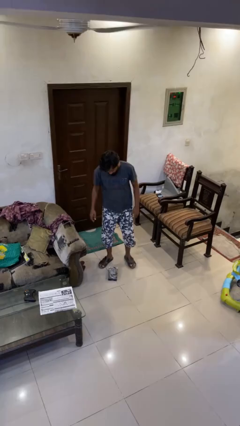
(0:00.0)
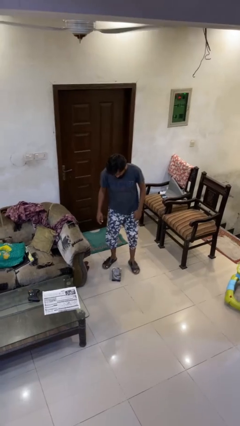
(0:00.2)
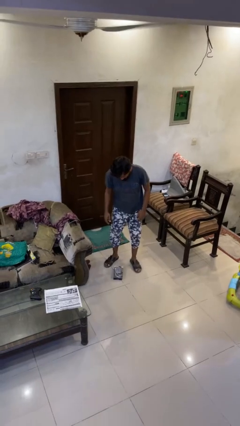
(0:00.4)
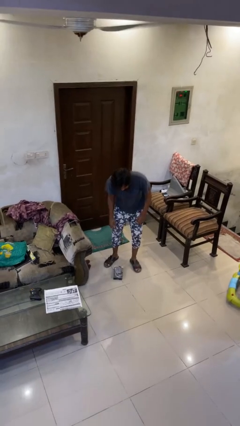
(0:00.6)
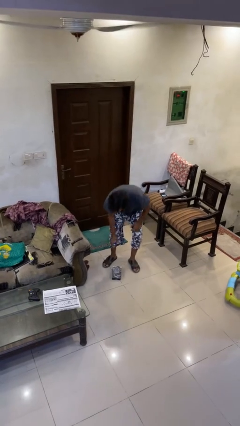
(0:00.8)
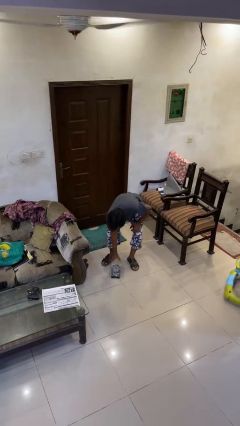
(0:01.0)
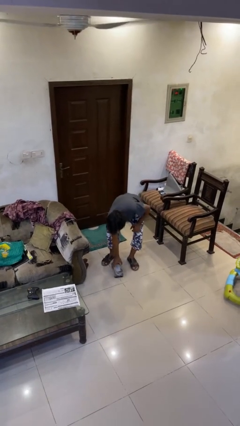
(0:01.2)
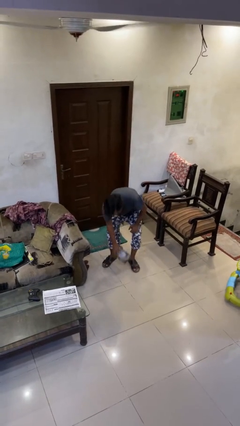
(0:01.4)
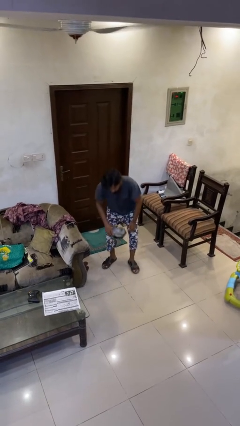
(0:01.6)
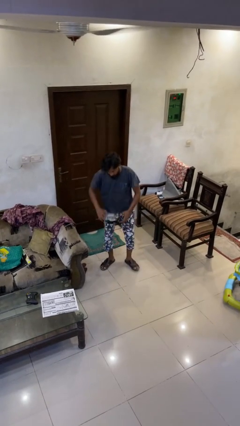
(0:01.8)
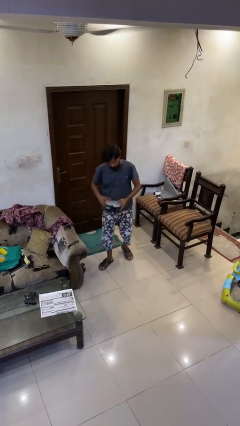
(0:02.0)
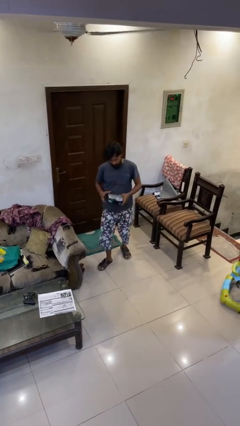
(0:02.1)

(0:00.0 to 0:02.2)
person picks up object from floor

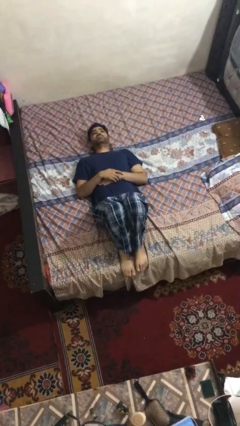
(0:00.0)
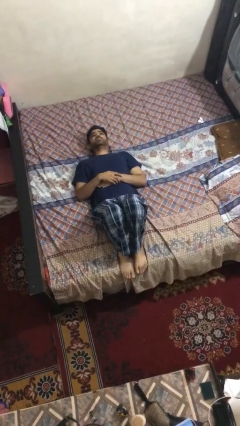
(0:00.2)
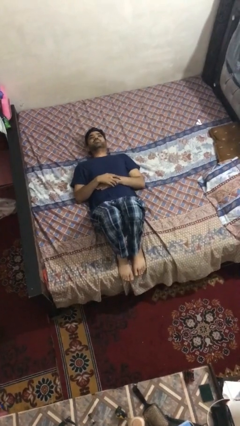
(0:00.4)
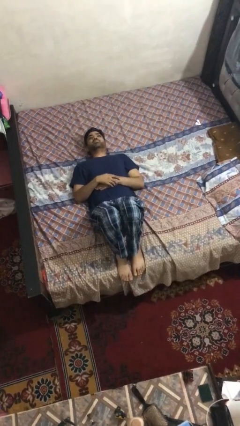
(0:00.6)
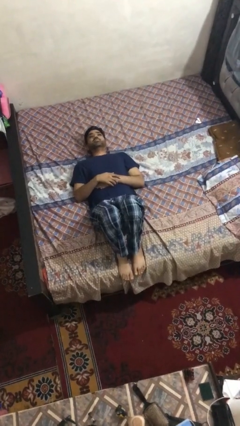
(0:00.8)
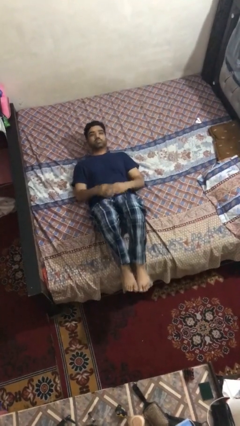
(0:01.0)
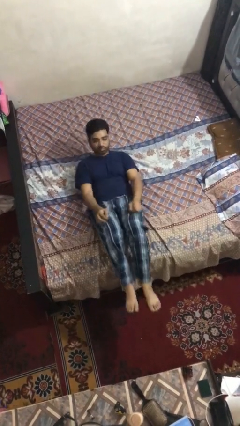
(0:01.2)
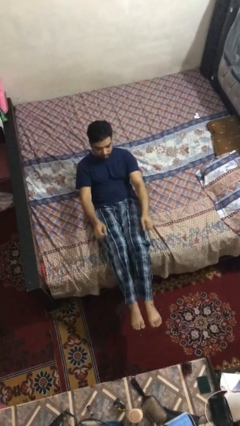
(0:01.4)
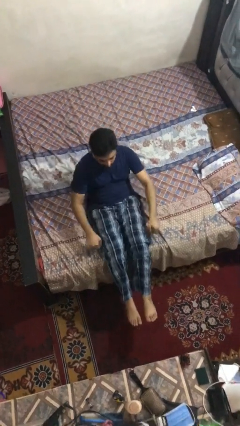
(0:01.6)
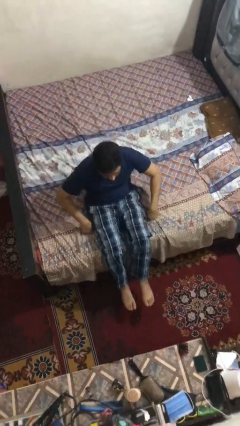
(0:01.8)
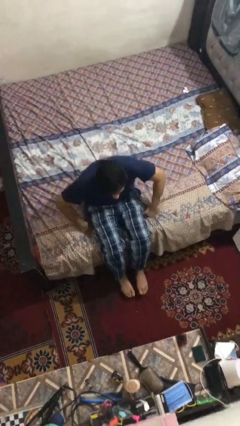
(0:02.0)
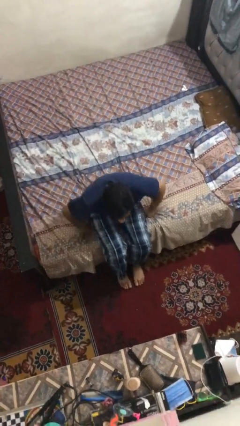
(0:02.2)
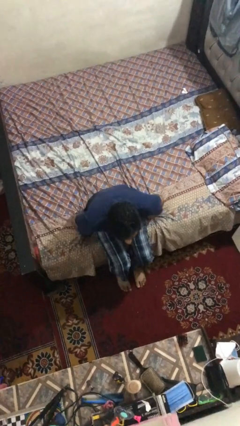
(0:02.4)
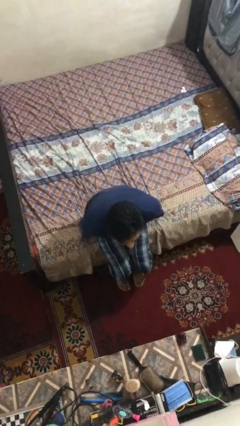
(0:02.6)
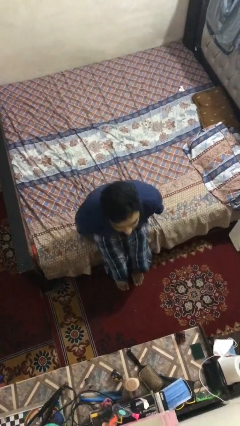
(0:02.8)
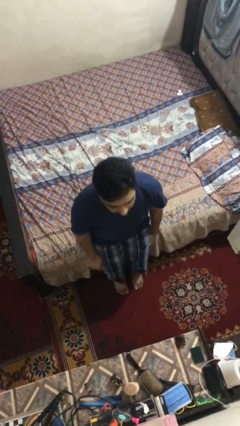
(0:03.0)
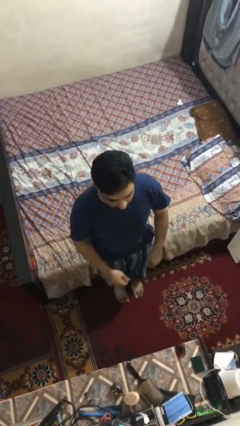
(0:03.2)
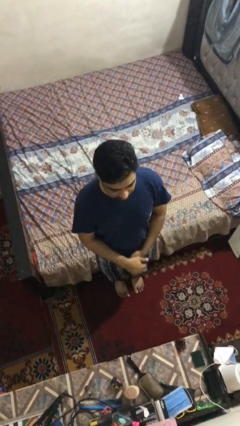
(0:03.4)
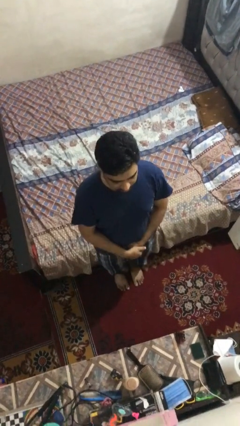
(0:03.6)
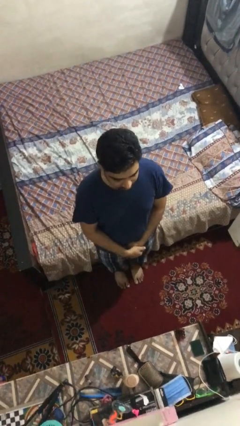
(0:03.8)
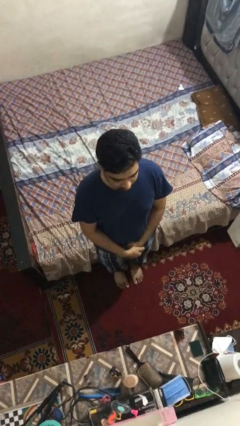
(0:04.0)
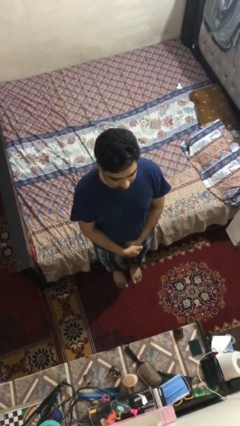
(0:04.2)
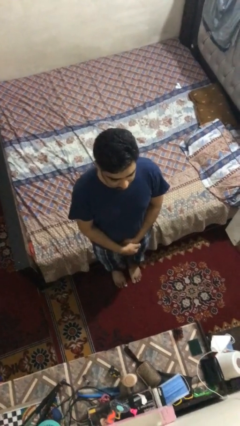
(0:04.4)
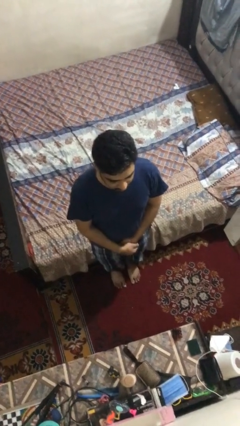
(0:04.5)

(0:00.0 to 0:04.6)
person stands up

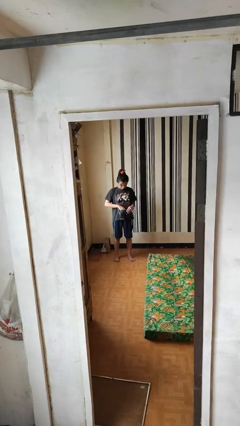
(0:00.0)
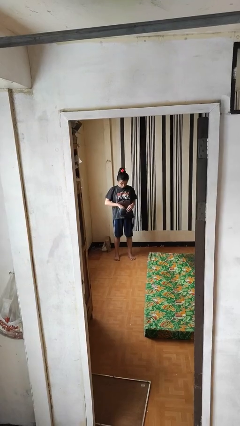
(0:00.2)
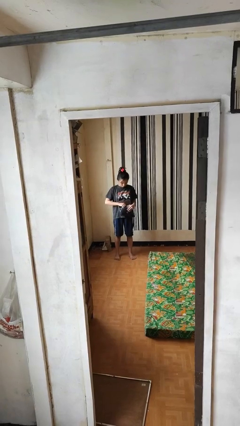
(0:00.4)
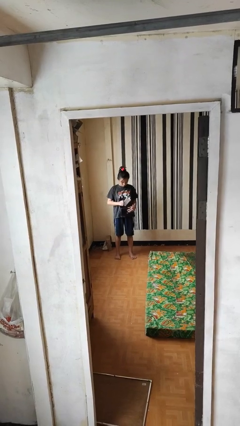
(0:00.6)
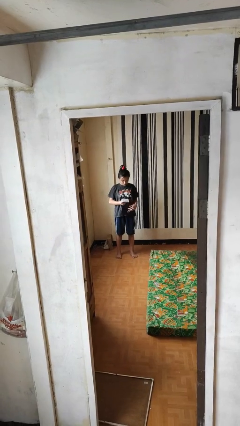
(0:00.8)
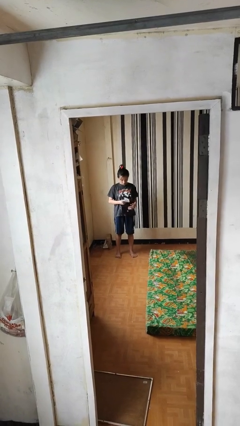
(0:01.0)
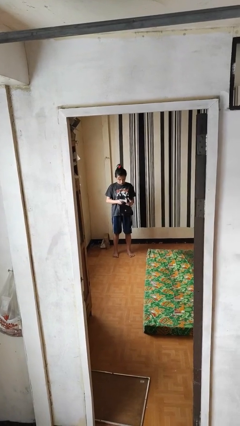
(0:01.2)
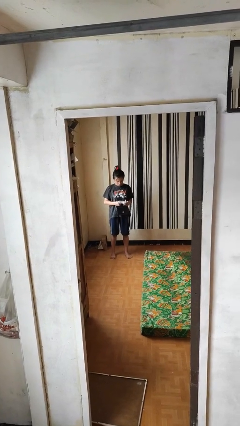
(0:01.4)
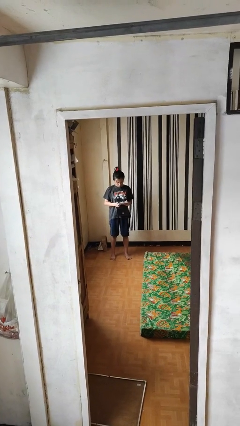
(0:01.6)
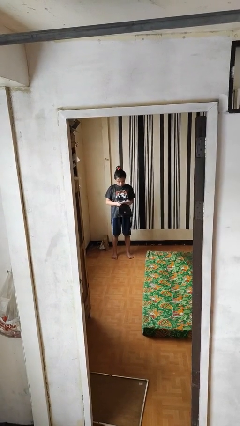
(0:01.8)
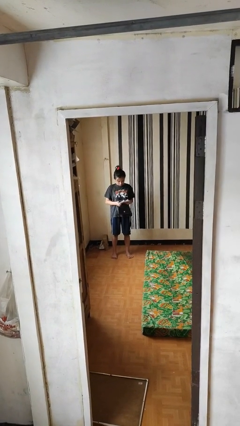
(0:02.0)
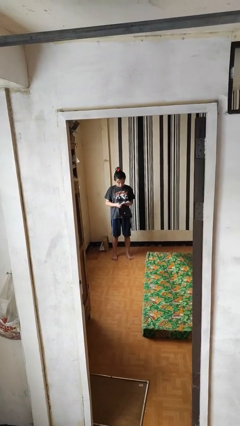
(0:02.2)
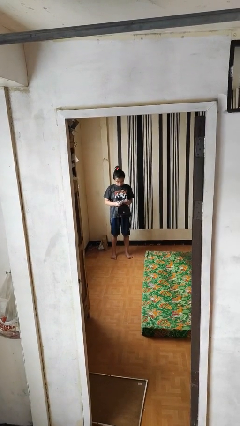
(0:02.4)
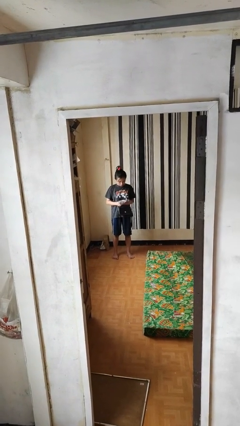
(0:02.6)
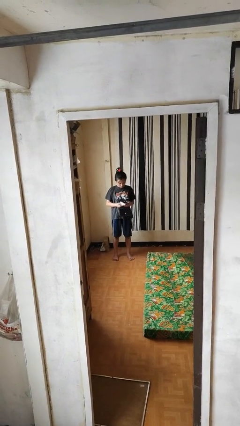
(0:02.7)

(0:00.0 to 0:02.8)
person takes object from purse

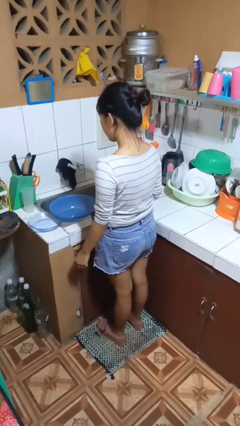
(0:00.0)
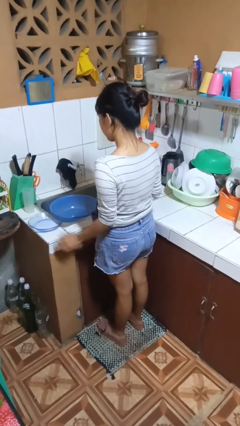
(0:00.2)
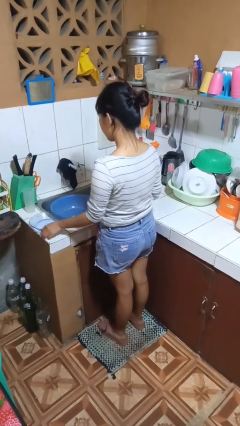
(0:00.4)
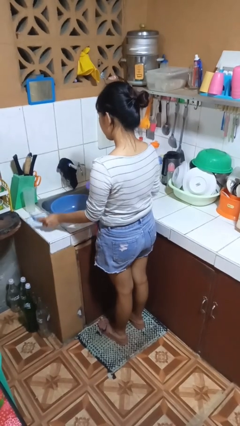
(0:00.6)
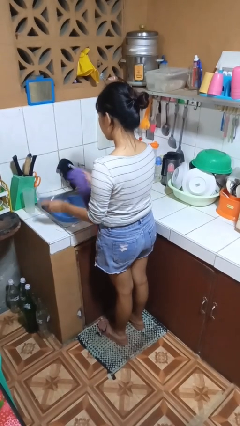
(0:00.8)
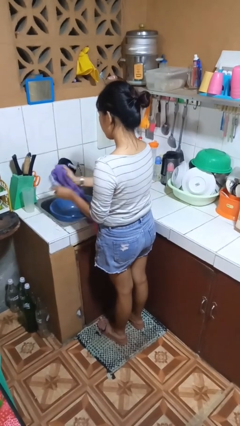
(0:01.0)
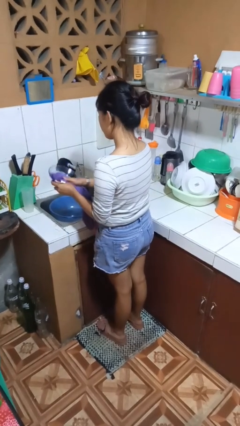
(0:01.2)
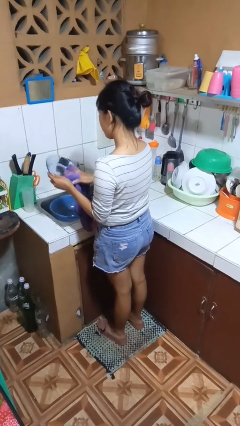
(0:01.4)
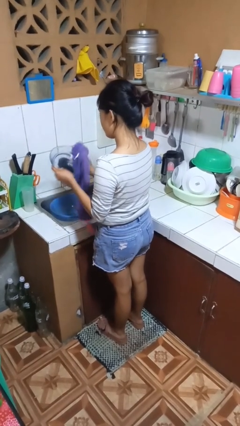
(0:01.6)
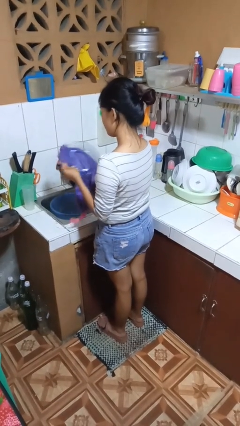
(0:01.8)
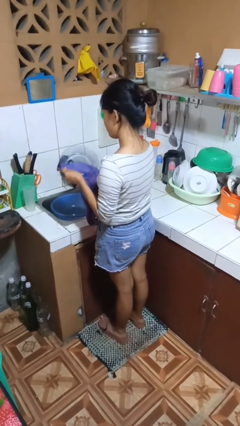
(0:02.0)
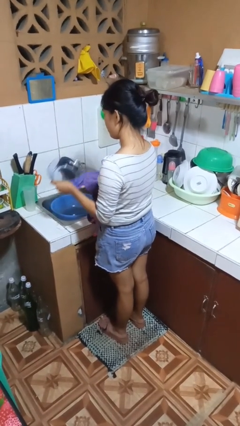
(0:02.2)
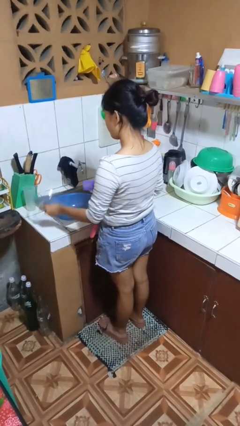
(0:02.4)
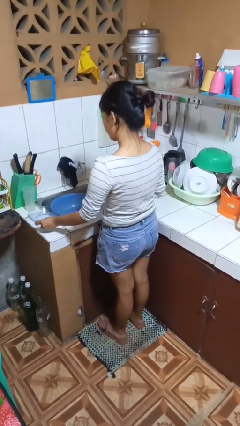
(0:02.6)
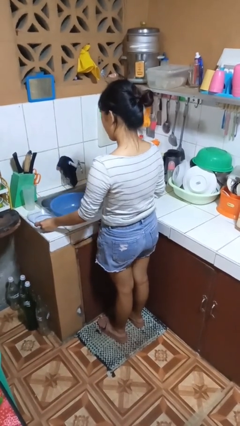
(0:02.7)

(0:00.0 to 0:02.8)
person dries dish

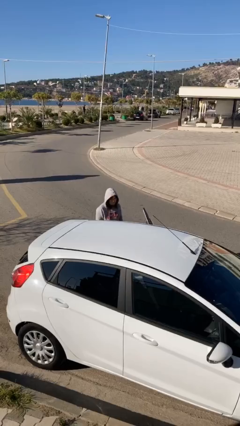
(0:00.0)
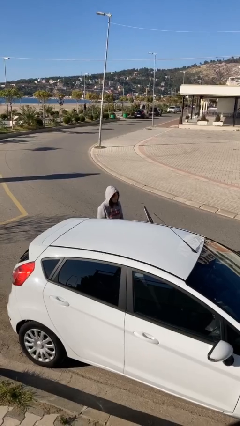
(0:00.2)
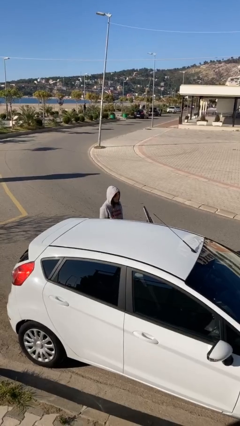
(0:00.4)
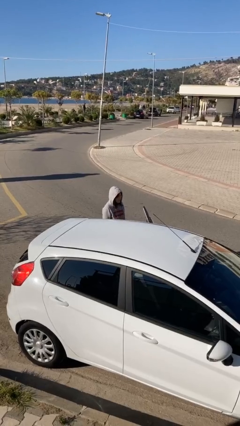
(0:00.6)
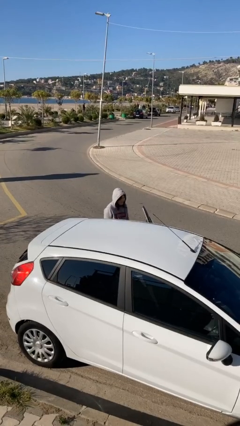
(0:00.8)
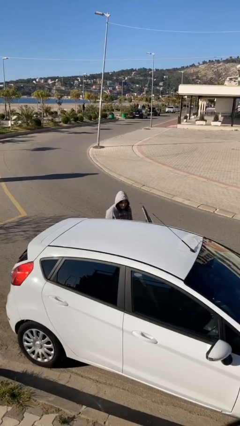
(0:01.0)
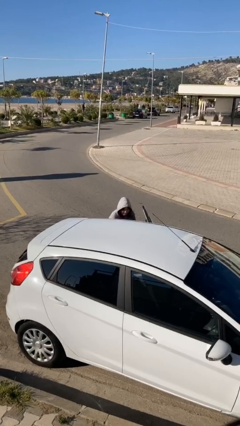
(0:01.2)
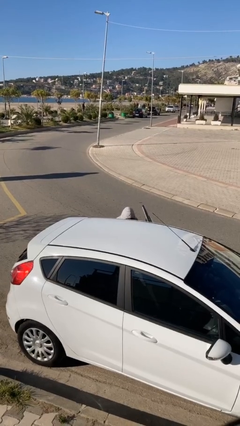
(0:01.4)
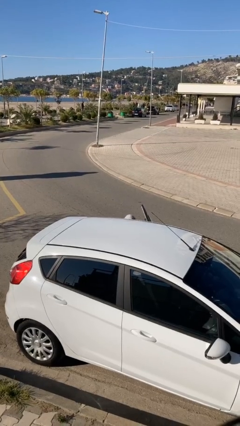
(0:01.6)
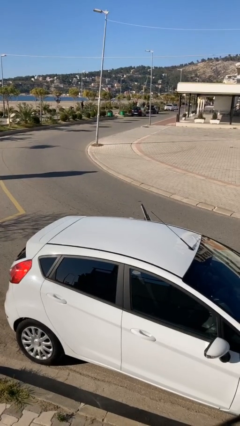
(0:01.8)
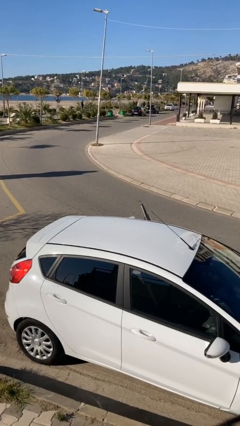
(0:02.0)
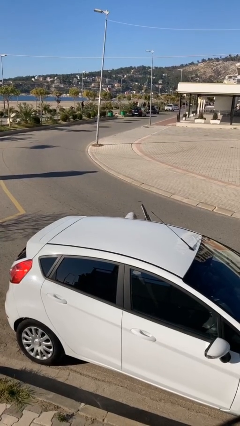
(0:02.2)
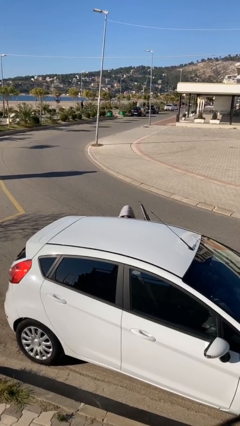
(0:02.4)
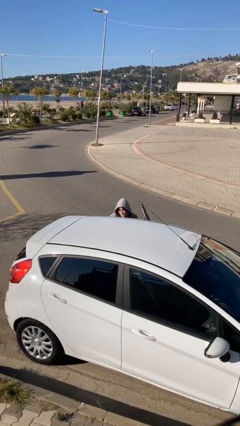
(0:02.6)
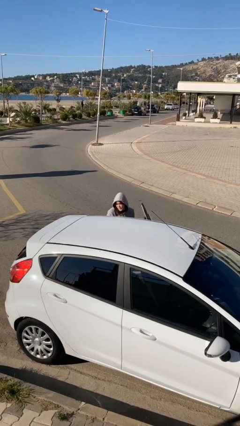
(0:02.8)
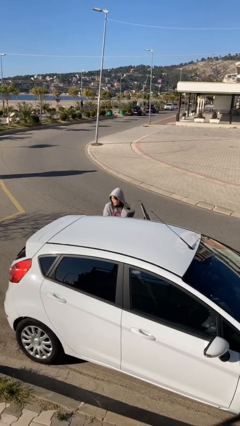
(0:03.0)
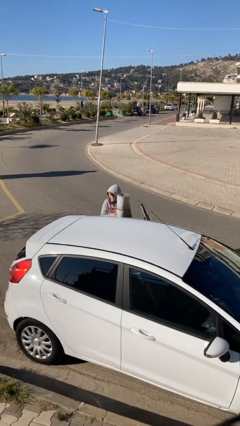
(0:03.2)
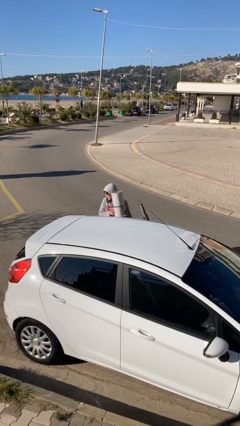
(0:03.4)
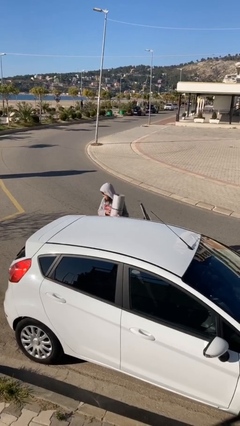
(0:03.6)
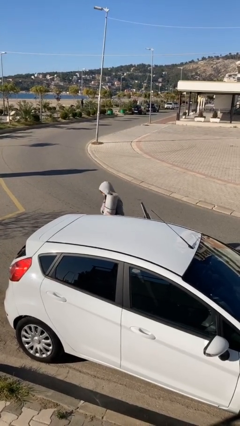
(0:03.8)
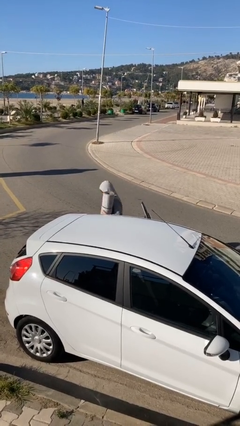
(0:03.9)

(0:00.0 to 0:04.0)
person unloads car

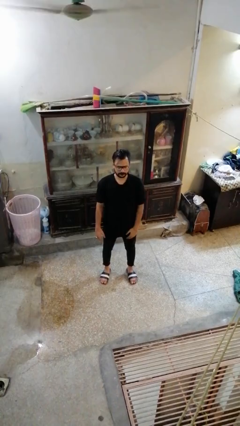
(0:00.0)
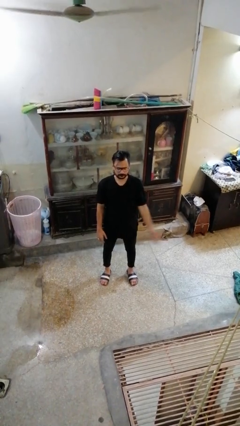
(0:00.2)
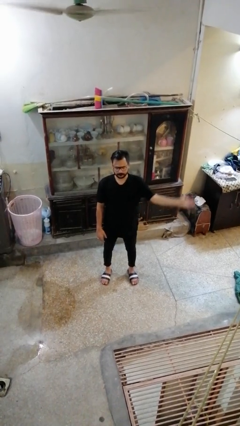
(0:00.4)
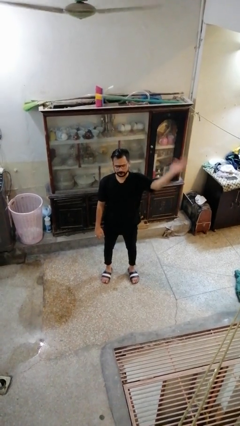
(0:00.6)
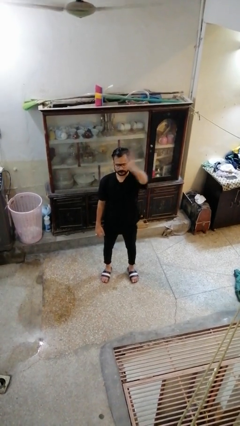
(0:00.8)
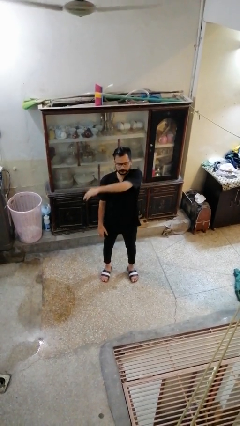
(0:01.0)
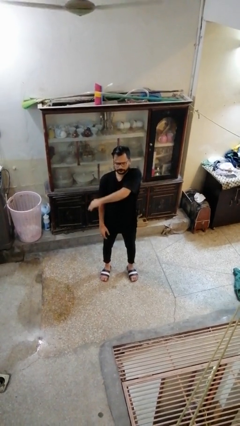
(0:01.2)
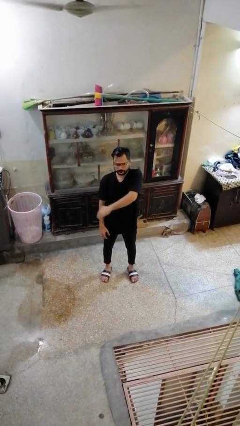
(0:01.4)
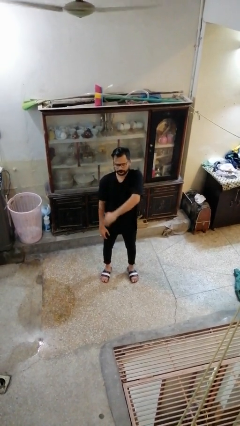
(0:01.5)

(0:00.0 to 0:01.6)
person gestures swipe right
